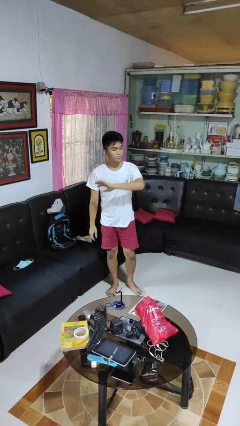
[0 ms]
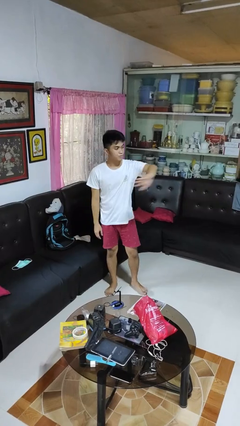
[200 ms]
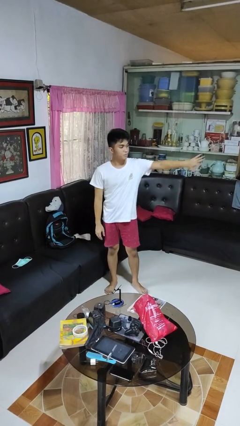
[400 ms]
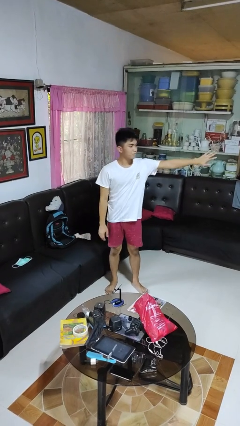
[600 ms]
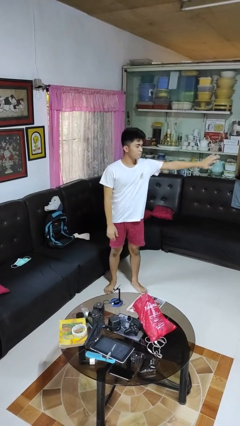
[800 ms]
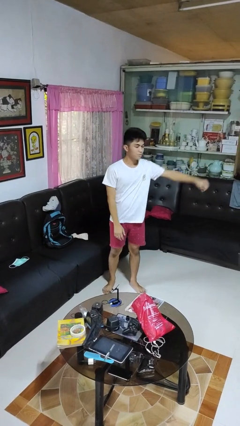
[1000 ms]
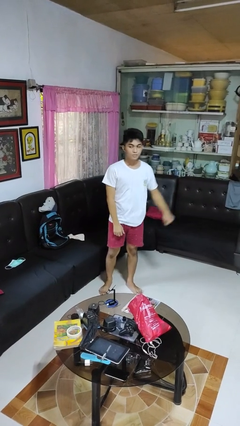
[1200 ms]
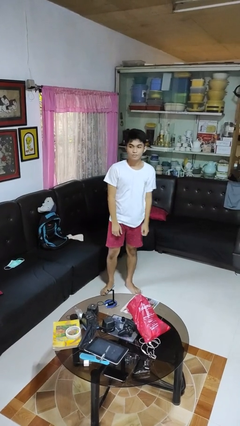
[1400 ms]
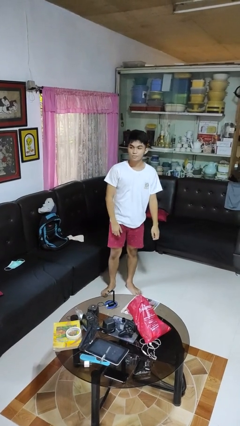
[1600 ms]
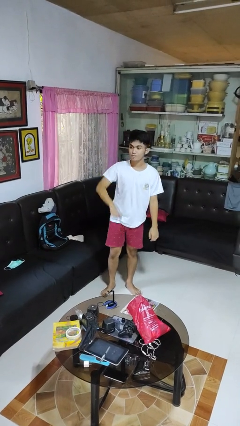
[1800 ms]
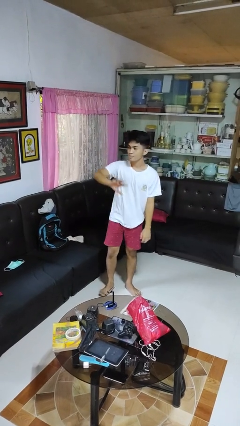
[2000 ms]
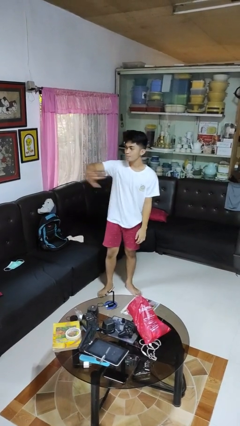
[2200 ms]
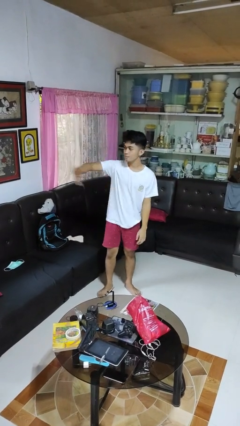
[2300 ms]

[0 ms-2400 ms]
person gestures swipe left

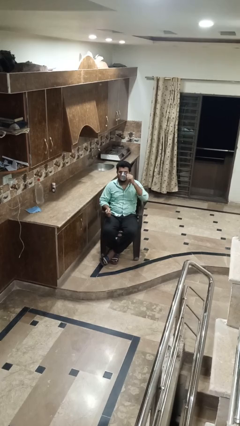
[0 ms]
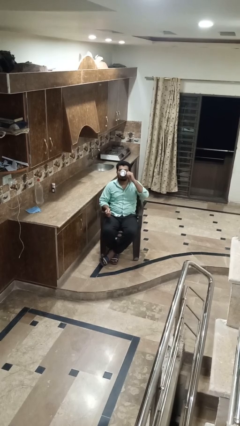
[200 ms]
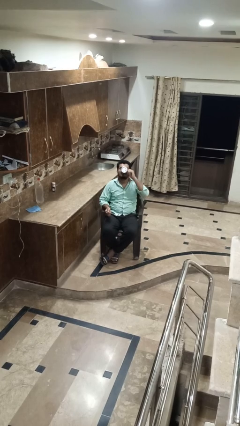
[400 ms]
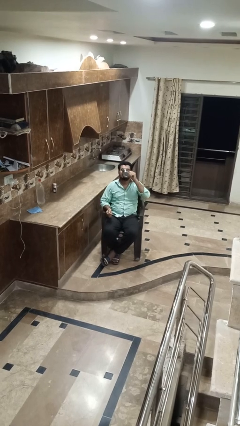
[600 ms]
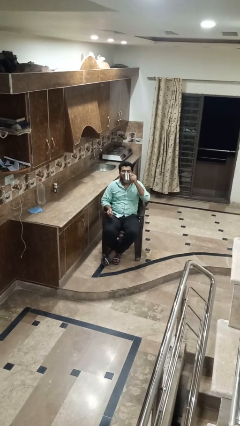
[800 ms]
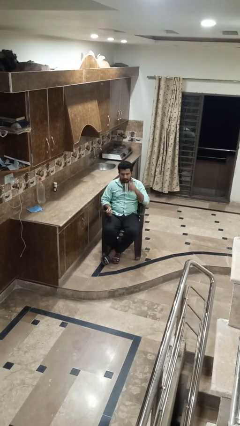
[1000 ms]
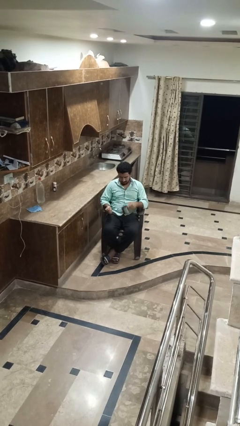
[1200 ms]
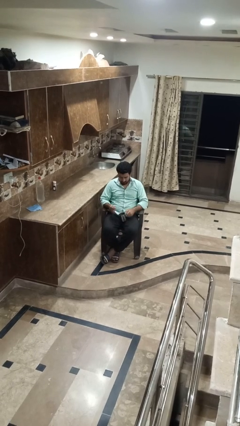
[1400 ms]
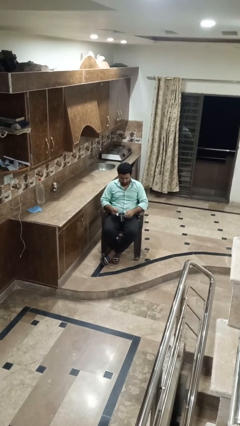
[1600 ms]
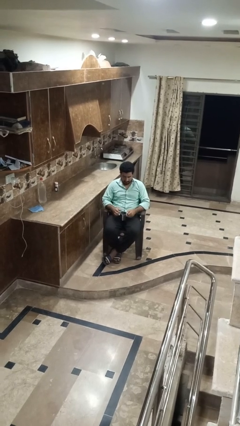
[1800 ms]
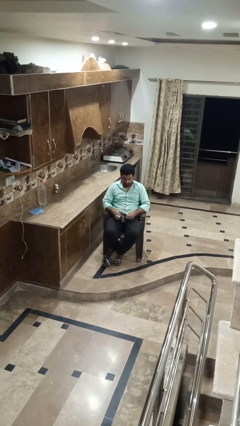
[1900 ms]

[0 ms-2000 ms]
person drinks from mug

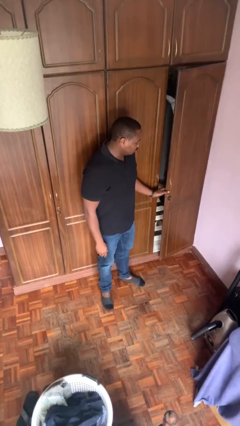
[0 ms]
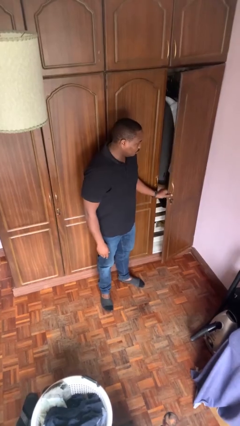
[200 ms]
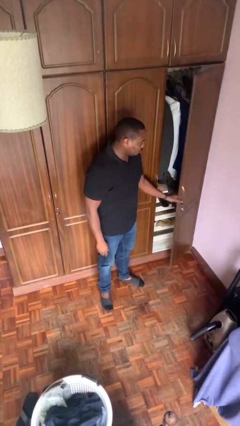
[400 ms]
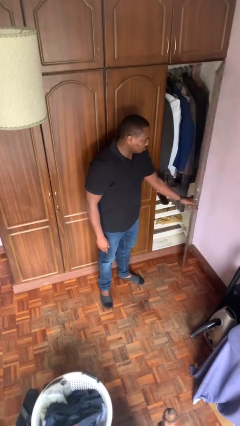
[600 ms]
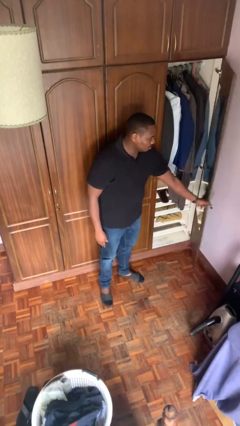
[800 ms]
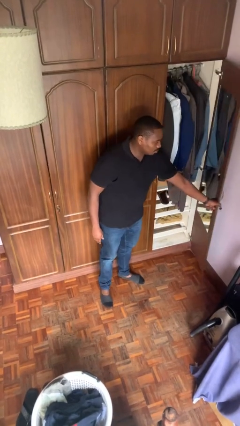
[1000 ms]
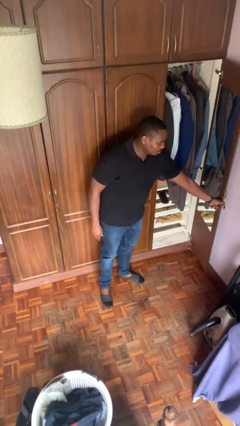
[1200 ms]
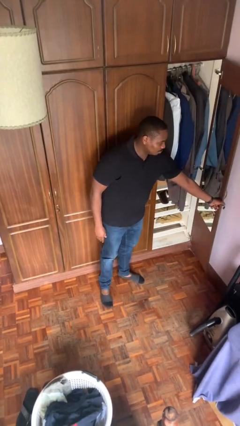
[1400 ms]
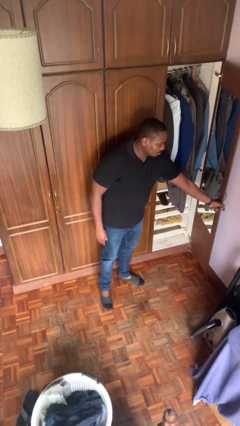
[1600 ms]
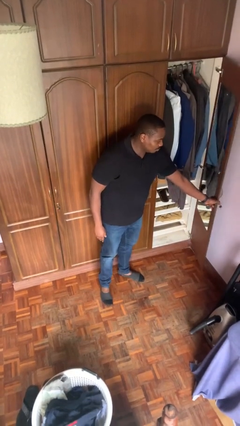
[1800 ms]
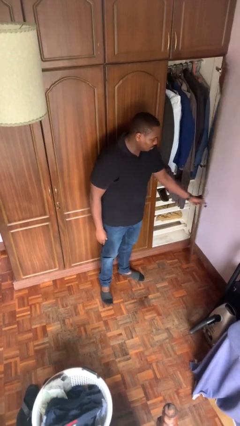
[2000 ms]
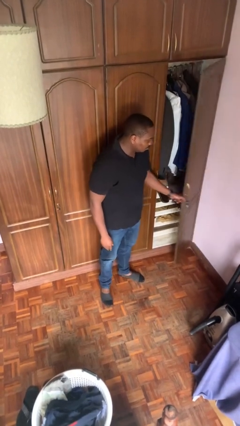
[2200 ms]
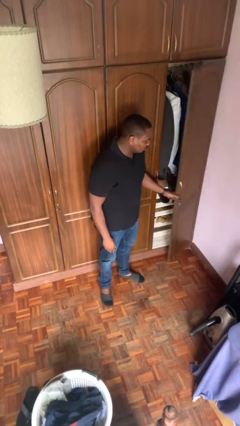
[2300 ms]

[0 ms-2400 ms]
person opens closet door

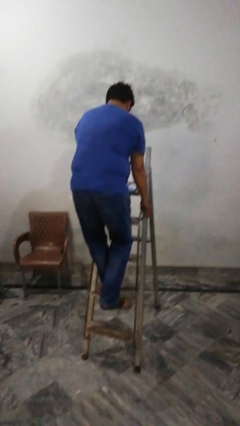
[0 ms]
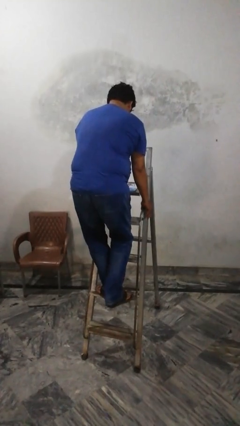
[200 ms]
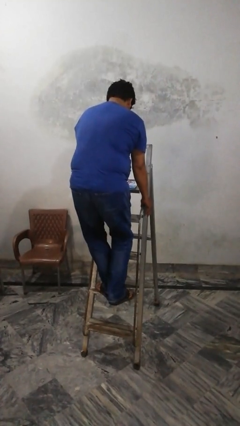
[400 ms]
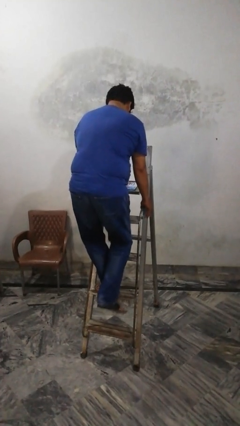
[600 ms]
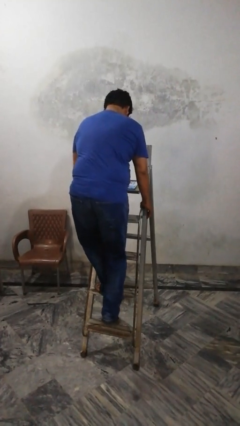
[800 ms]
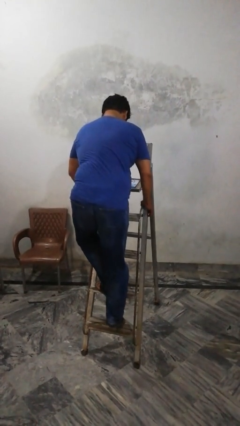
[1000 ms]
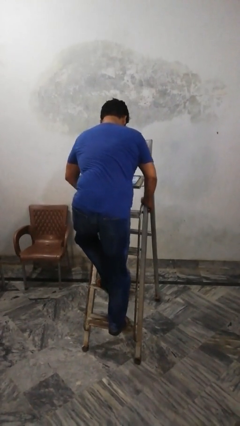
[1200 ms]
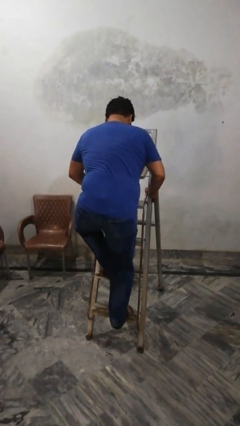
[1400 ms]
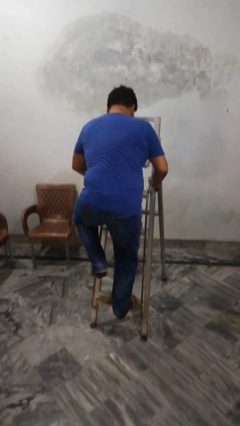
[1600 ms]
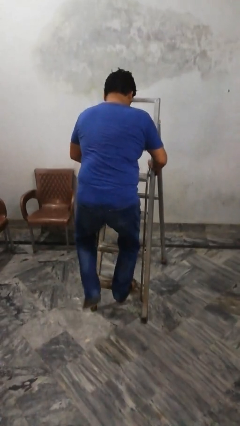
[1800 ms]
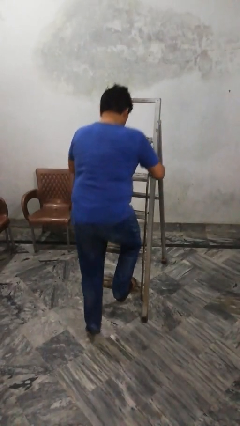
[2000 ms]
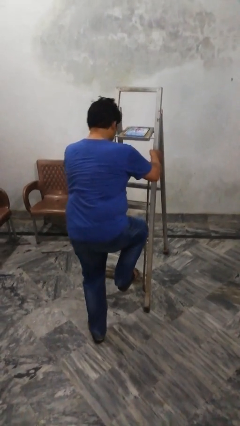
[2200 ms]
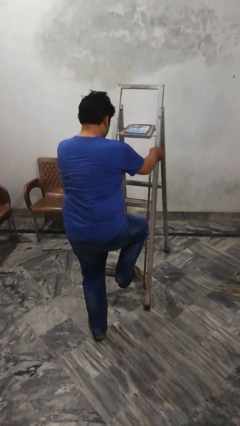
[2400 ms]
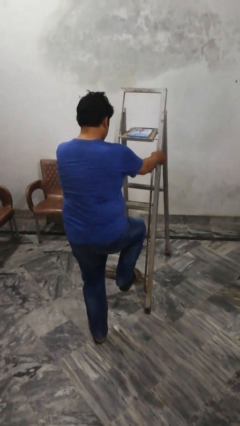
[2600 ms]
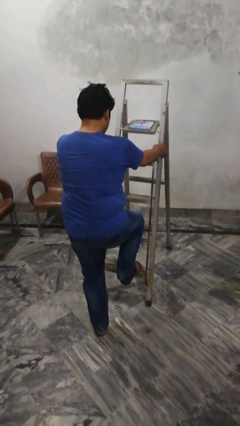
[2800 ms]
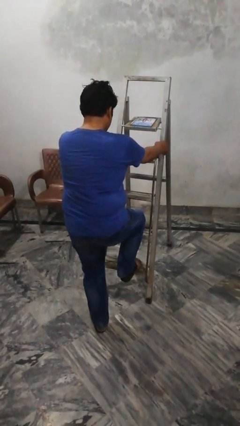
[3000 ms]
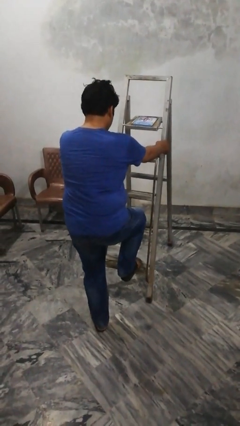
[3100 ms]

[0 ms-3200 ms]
person climbs down ladder

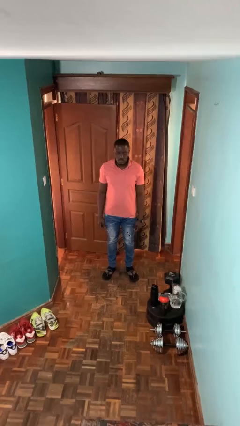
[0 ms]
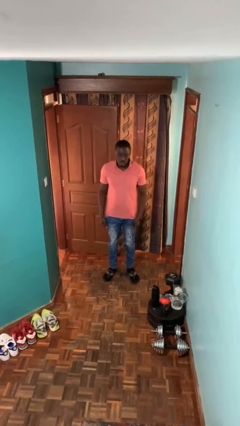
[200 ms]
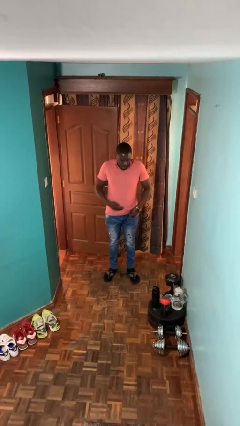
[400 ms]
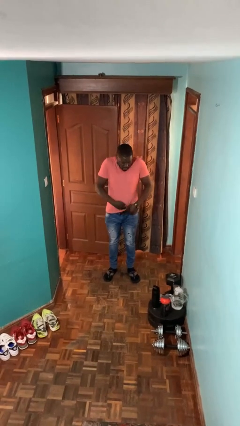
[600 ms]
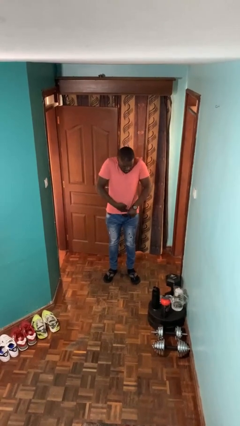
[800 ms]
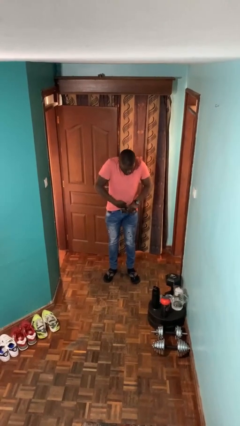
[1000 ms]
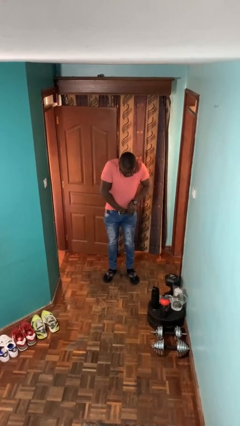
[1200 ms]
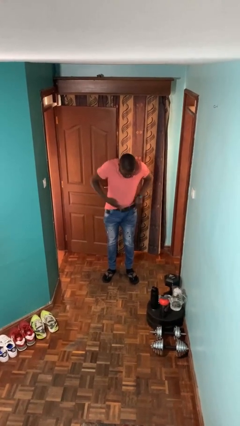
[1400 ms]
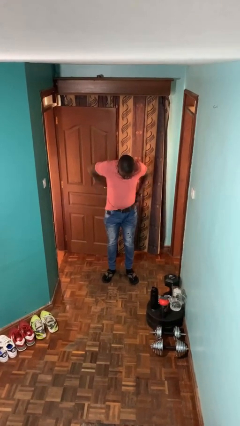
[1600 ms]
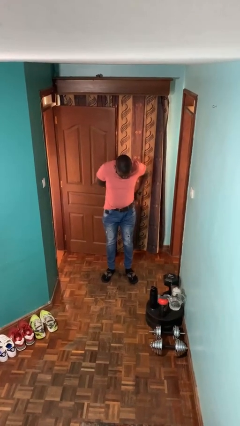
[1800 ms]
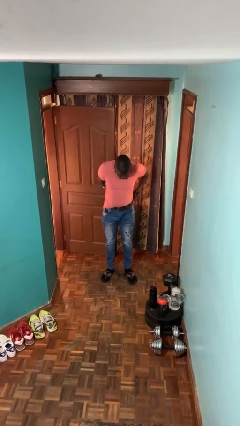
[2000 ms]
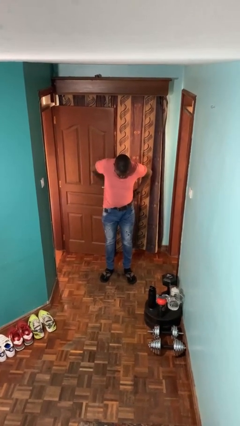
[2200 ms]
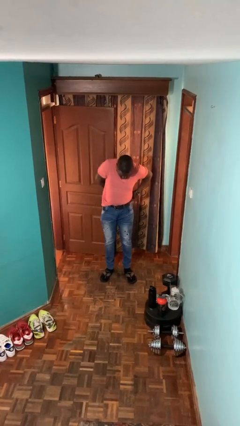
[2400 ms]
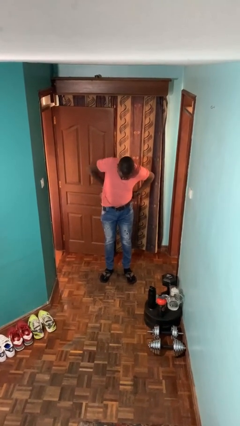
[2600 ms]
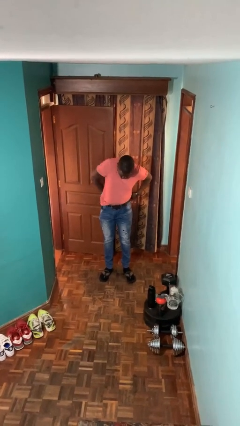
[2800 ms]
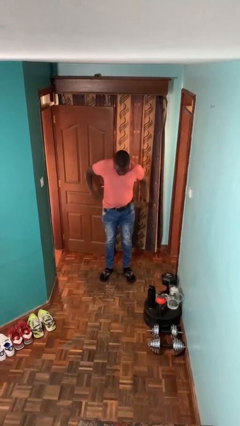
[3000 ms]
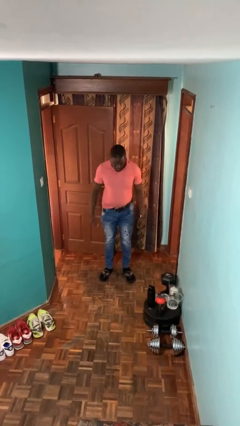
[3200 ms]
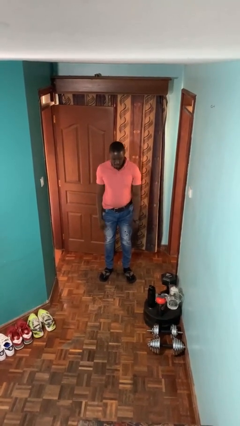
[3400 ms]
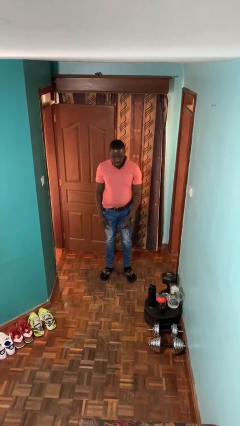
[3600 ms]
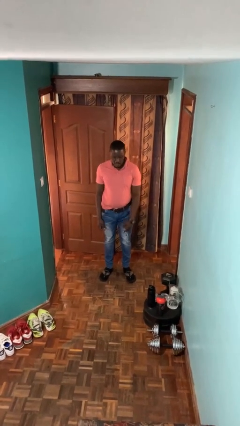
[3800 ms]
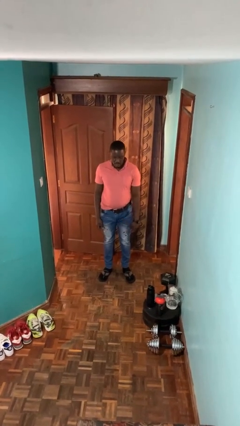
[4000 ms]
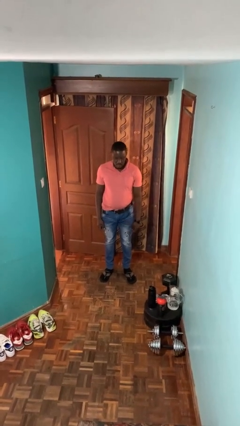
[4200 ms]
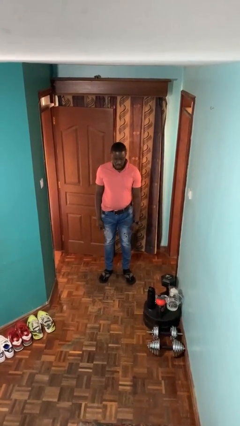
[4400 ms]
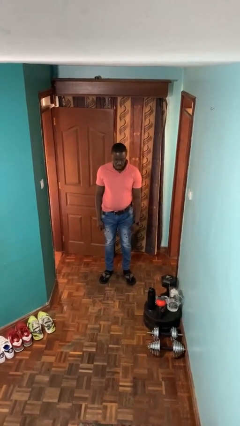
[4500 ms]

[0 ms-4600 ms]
person tucks in shirt

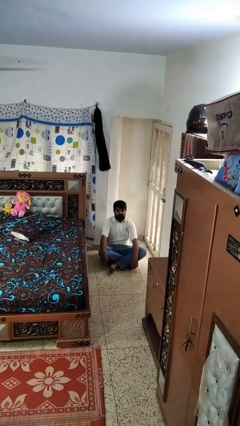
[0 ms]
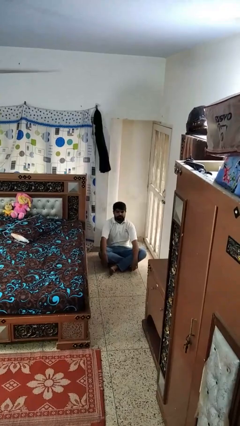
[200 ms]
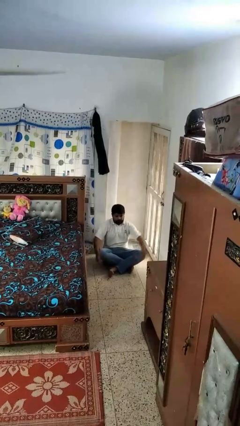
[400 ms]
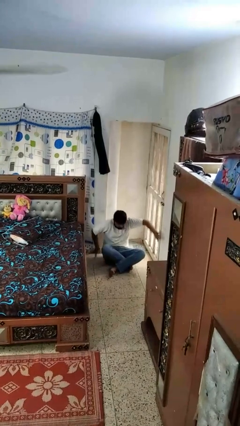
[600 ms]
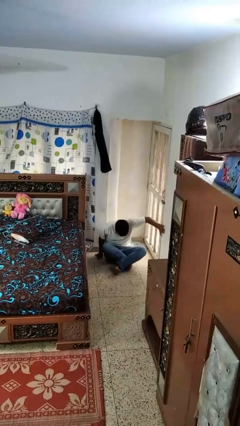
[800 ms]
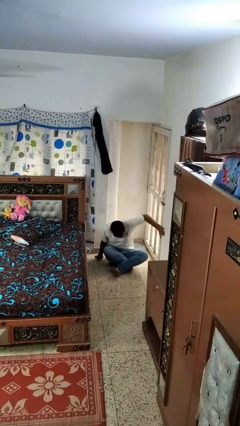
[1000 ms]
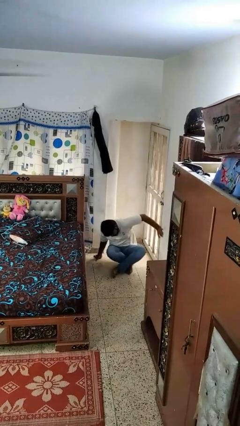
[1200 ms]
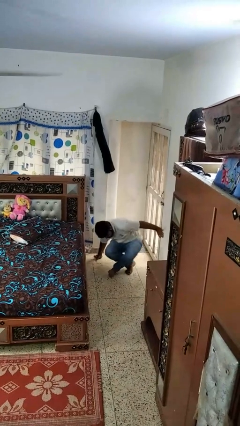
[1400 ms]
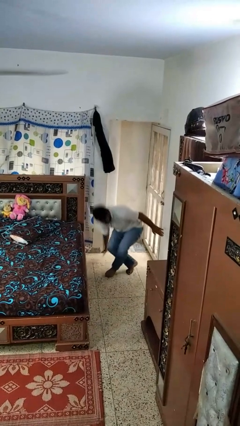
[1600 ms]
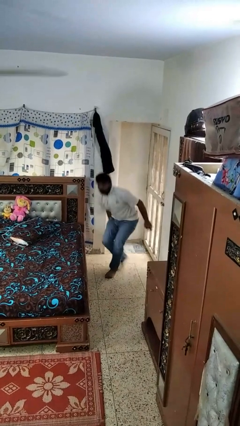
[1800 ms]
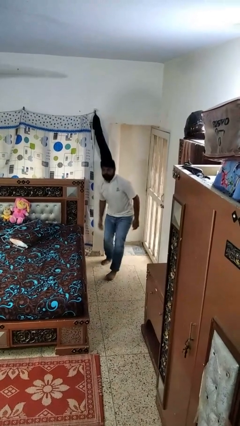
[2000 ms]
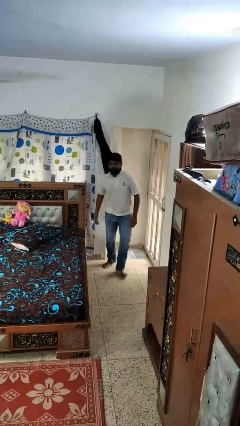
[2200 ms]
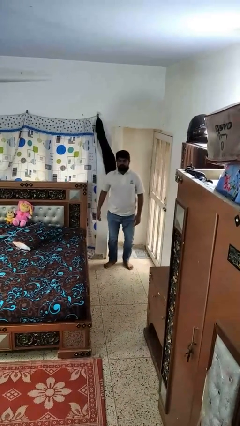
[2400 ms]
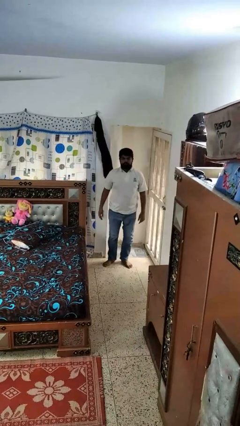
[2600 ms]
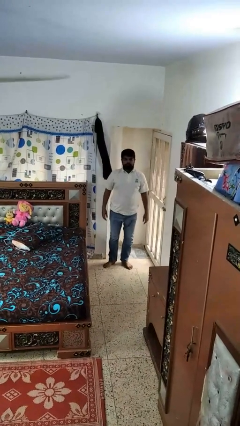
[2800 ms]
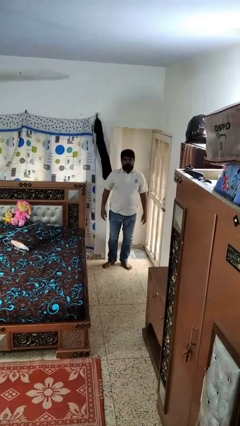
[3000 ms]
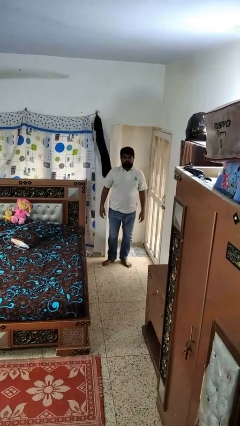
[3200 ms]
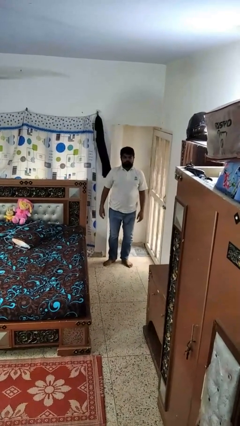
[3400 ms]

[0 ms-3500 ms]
person stands up from floor
